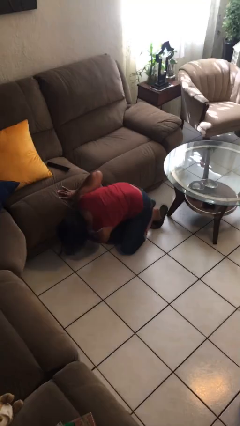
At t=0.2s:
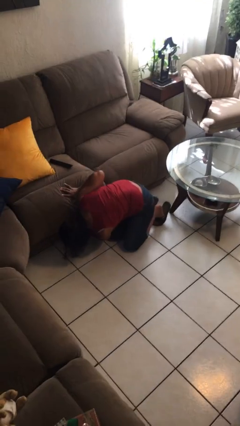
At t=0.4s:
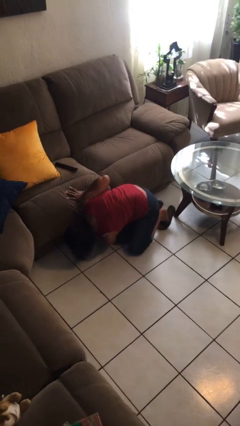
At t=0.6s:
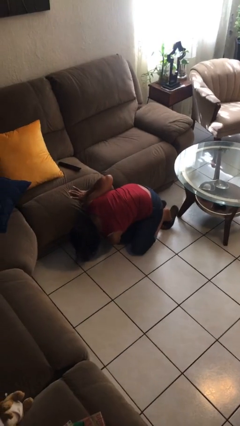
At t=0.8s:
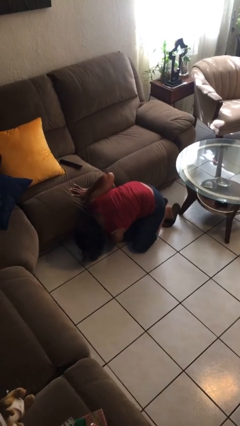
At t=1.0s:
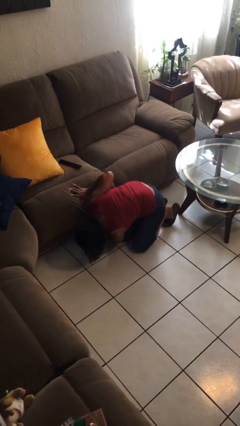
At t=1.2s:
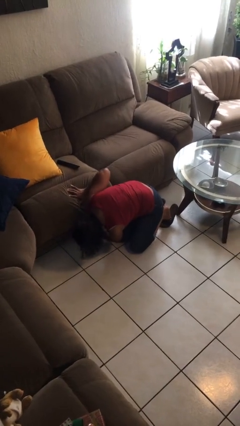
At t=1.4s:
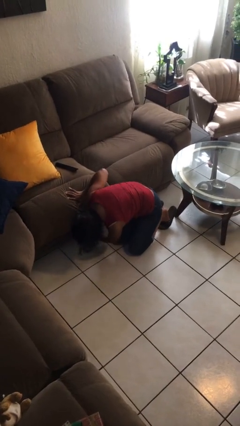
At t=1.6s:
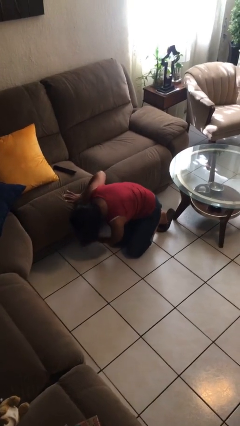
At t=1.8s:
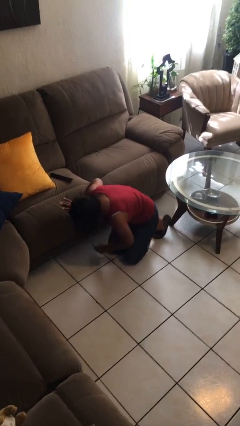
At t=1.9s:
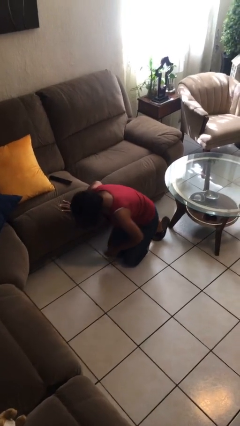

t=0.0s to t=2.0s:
person searches under couch

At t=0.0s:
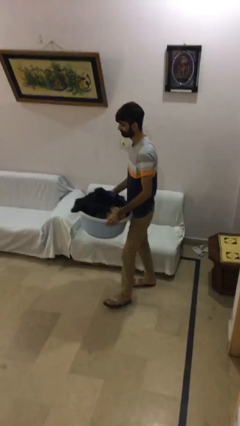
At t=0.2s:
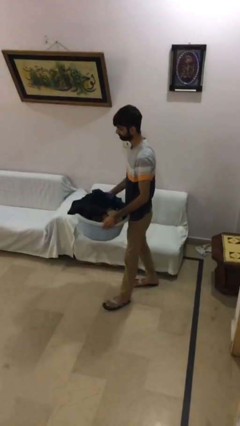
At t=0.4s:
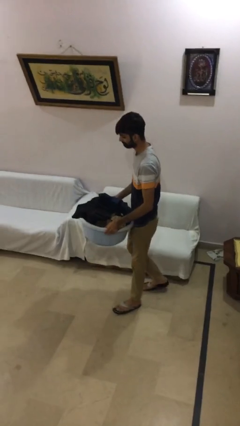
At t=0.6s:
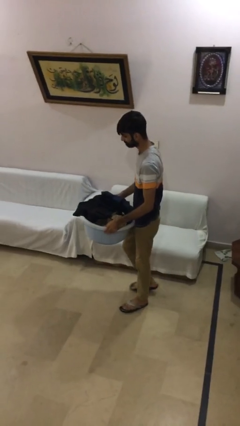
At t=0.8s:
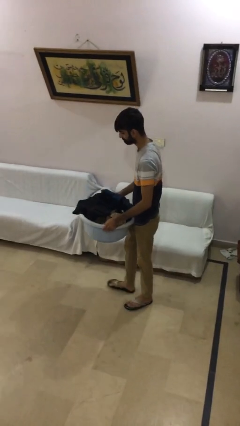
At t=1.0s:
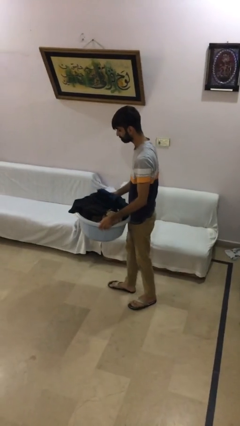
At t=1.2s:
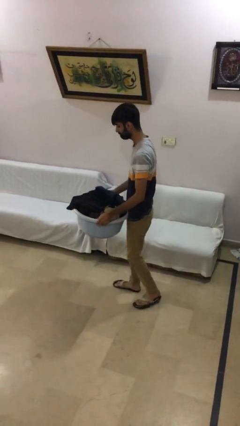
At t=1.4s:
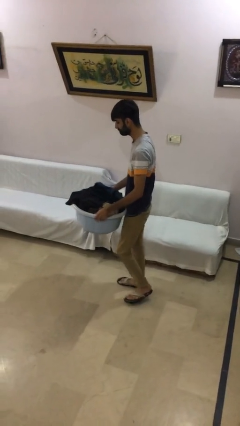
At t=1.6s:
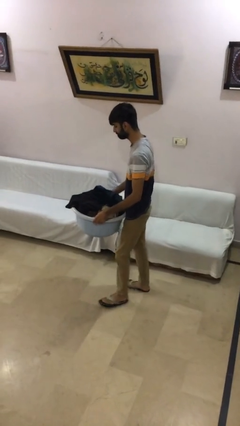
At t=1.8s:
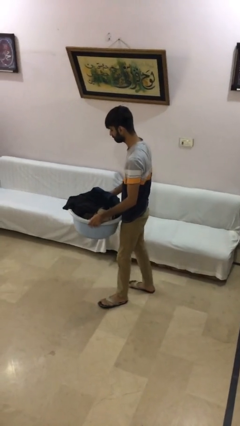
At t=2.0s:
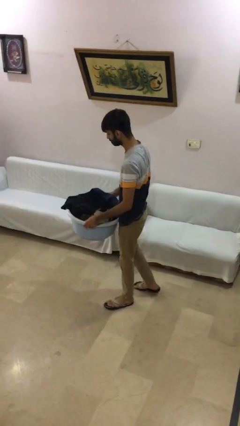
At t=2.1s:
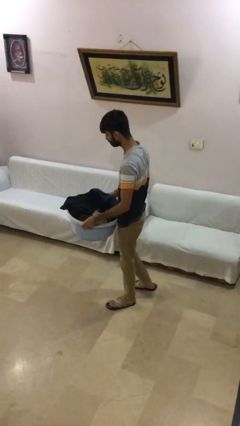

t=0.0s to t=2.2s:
person carries heavy object

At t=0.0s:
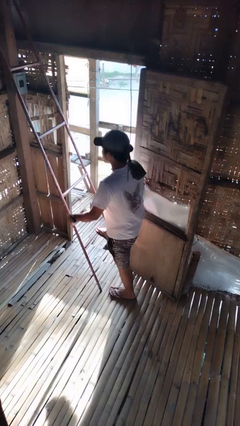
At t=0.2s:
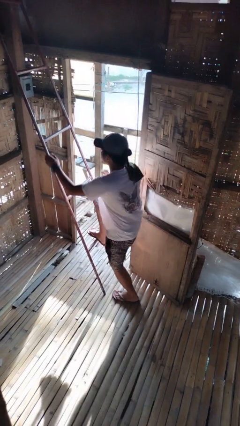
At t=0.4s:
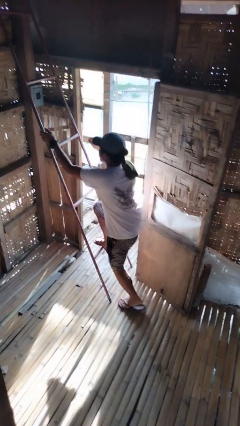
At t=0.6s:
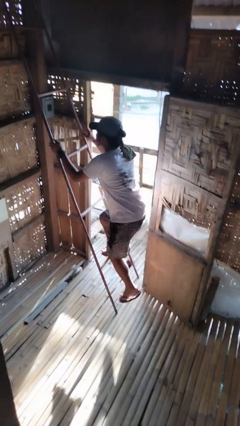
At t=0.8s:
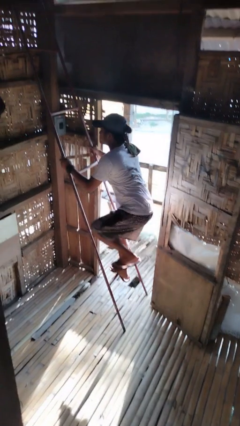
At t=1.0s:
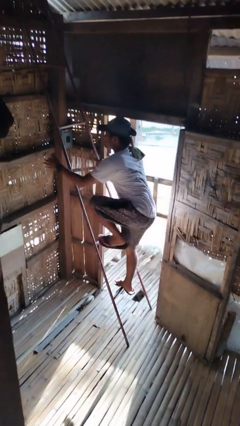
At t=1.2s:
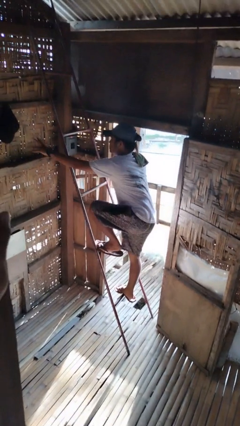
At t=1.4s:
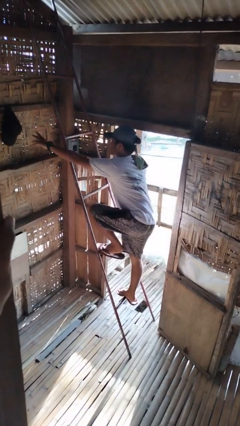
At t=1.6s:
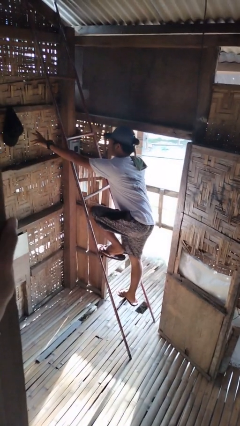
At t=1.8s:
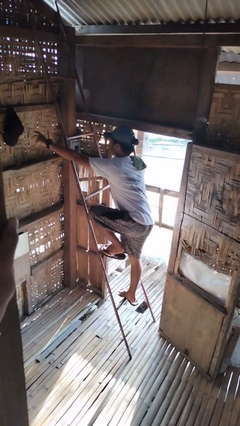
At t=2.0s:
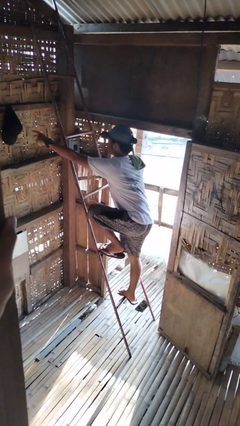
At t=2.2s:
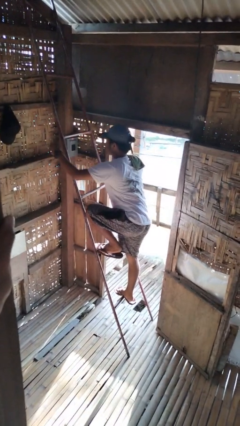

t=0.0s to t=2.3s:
person climbs up ladder

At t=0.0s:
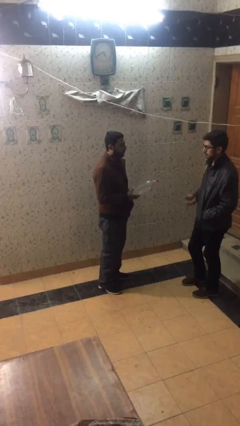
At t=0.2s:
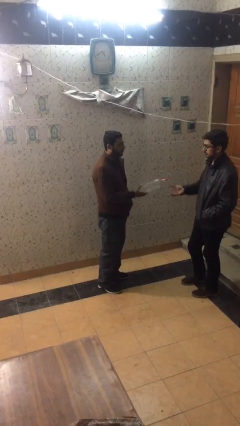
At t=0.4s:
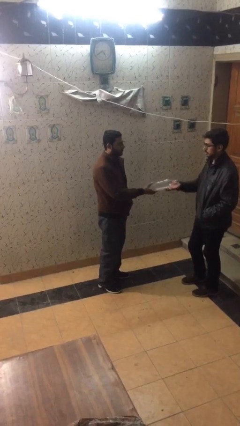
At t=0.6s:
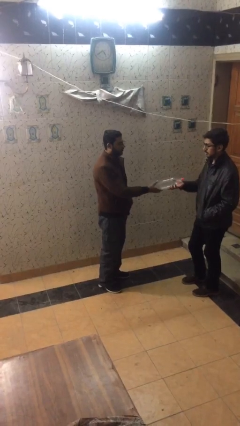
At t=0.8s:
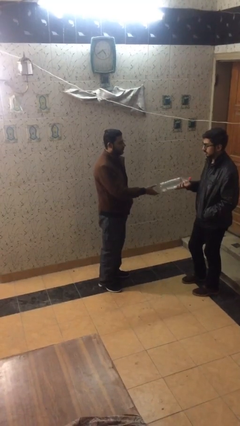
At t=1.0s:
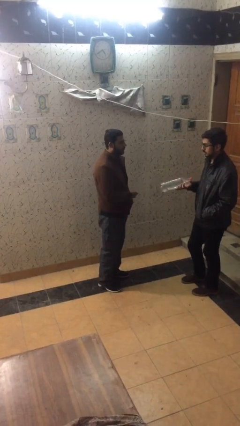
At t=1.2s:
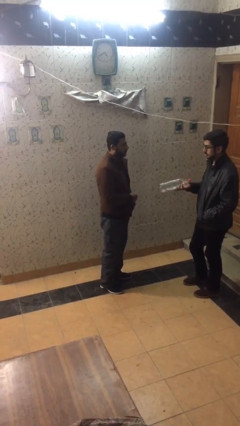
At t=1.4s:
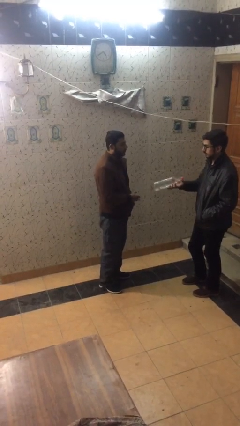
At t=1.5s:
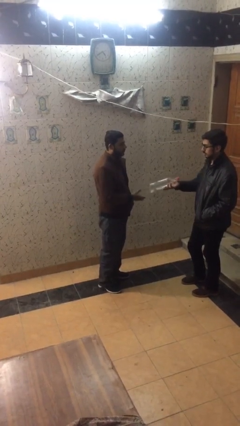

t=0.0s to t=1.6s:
person transfers object to person

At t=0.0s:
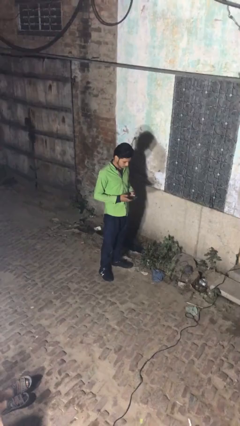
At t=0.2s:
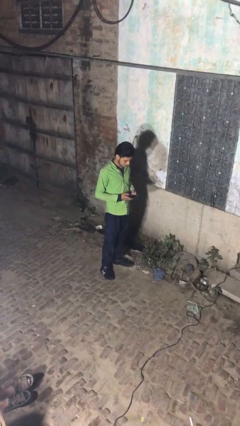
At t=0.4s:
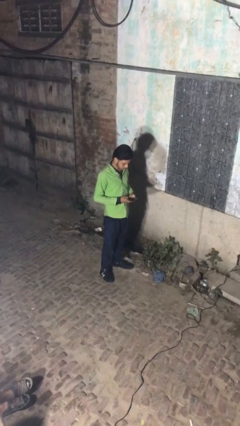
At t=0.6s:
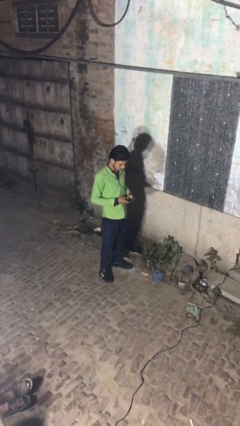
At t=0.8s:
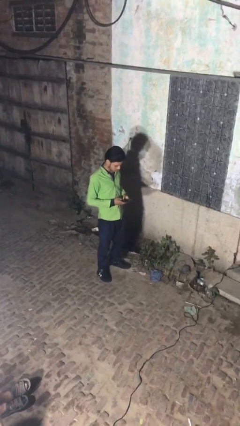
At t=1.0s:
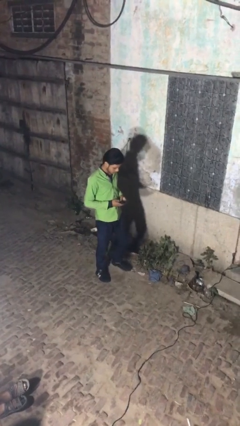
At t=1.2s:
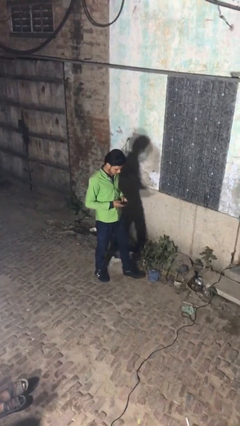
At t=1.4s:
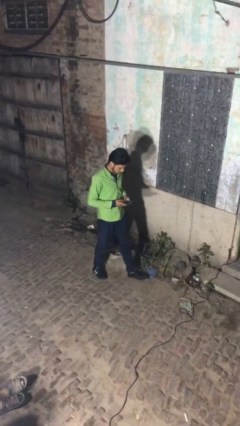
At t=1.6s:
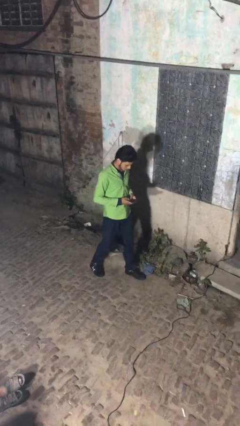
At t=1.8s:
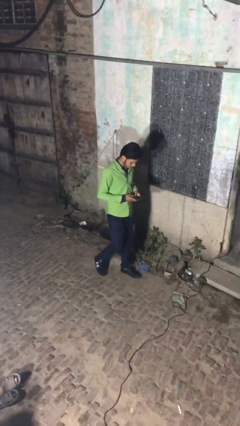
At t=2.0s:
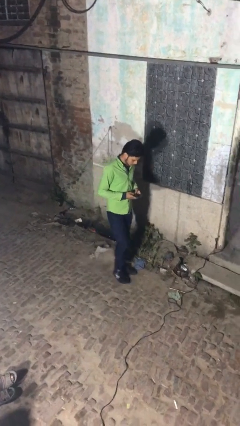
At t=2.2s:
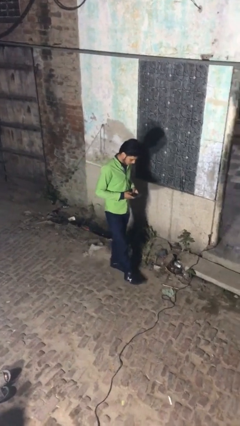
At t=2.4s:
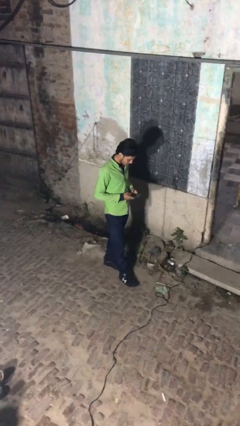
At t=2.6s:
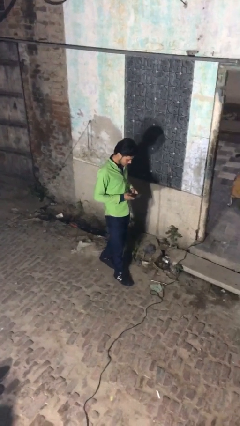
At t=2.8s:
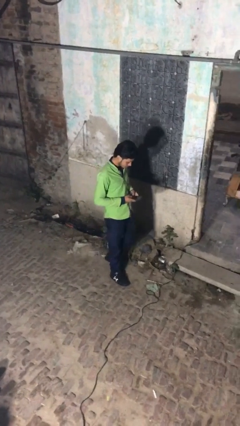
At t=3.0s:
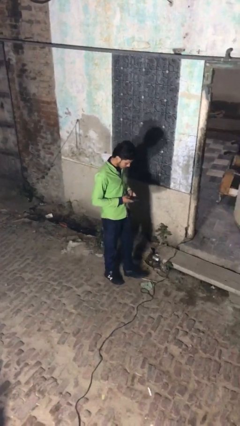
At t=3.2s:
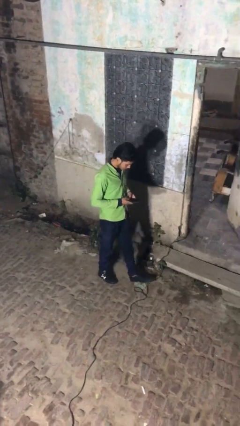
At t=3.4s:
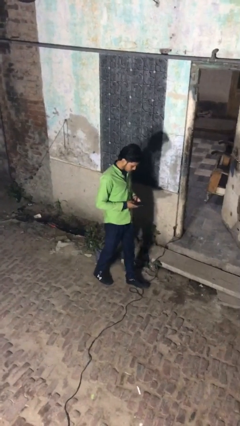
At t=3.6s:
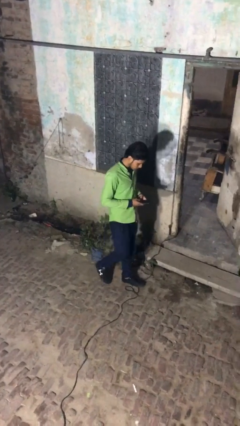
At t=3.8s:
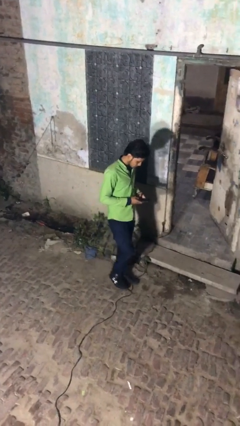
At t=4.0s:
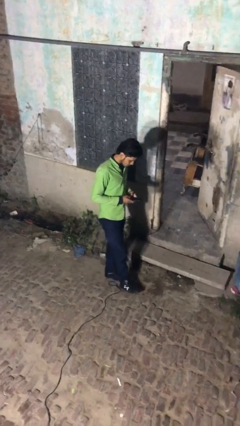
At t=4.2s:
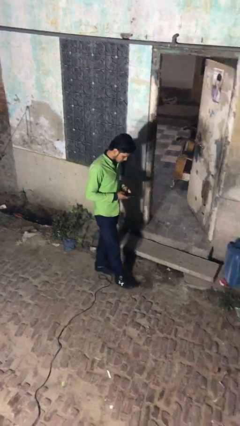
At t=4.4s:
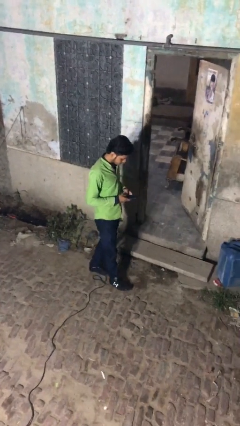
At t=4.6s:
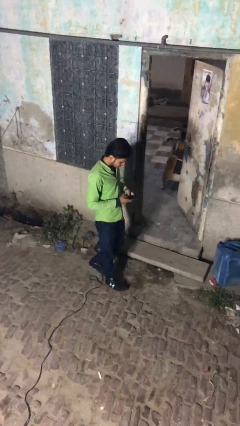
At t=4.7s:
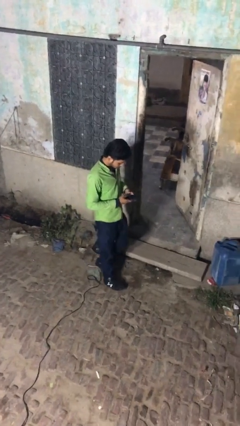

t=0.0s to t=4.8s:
person texts on phone

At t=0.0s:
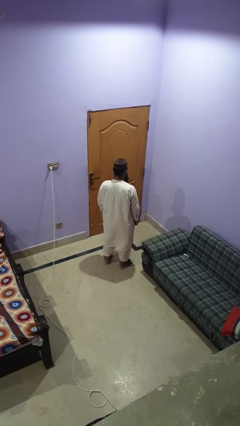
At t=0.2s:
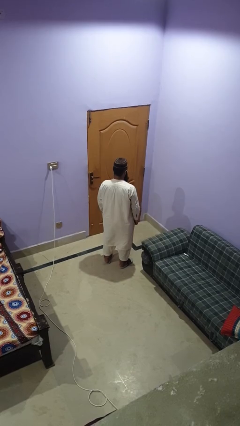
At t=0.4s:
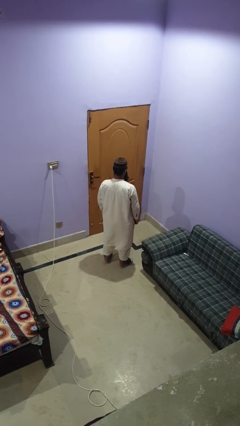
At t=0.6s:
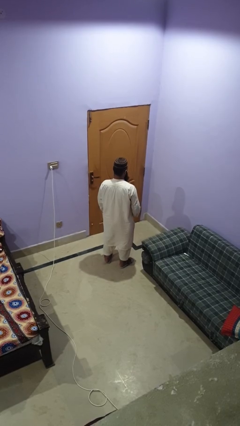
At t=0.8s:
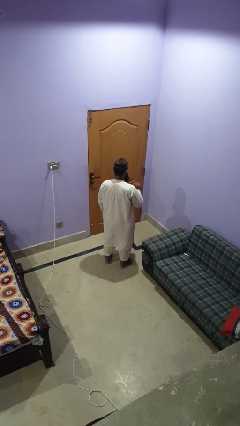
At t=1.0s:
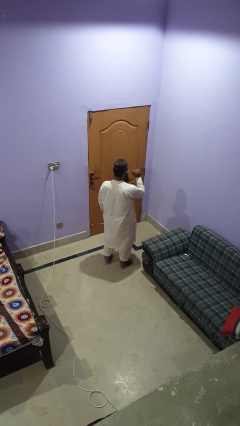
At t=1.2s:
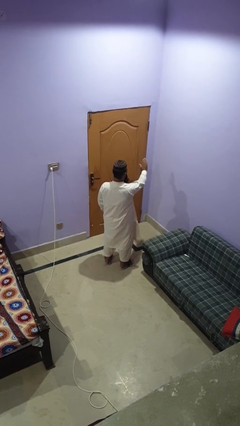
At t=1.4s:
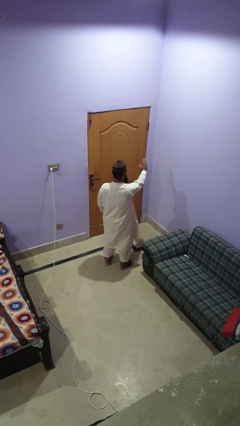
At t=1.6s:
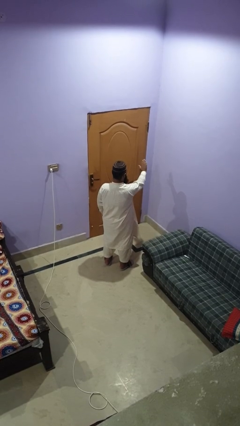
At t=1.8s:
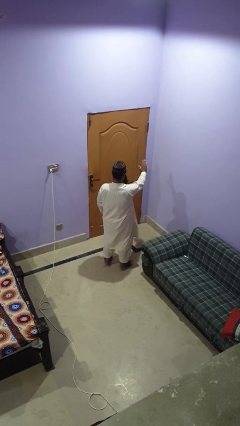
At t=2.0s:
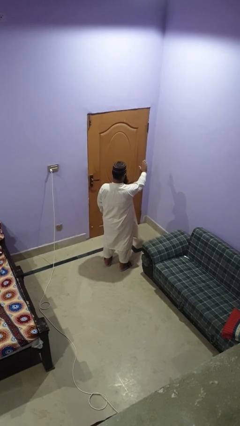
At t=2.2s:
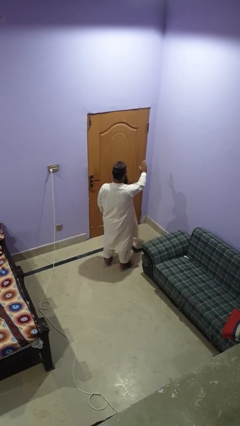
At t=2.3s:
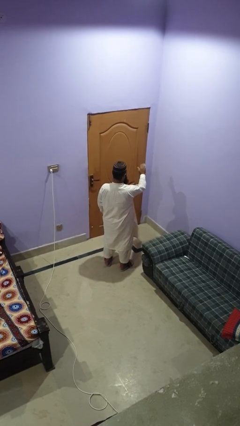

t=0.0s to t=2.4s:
person gestures stop

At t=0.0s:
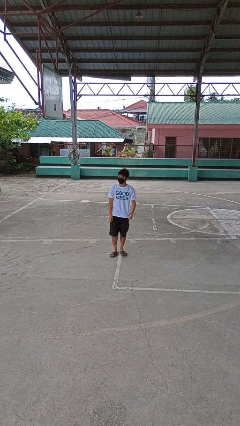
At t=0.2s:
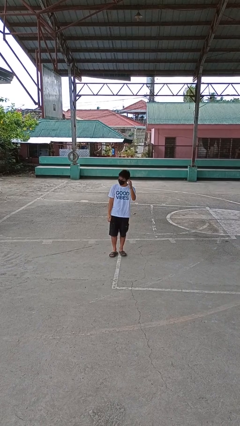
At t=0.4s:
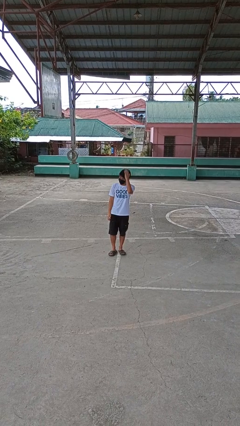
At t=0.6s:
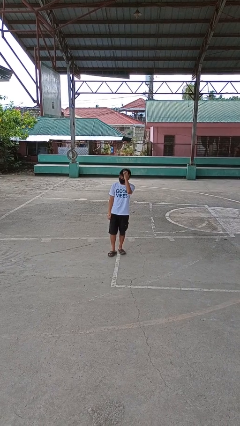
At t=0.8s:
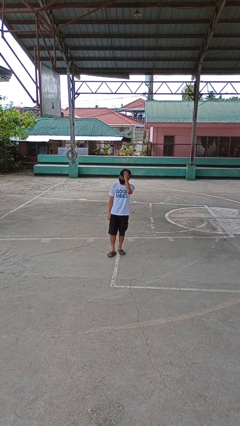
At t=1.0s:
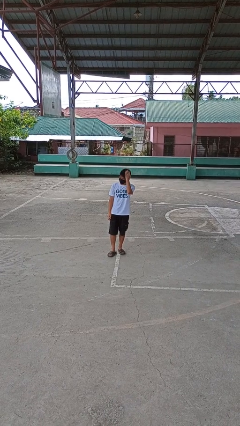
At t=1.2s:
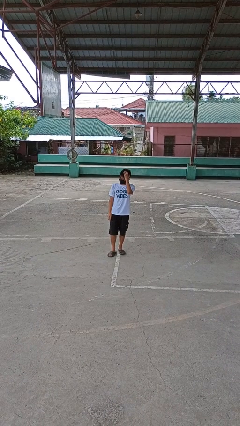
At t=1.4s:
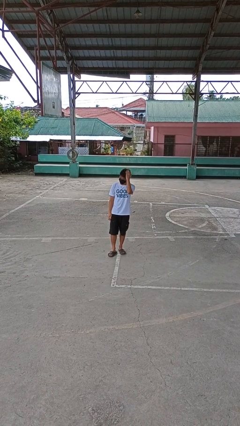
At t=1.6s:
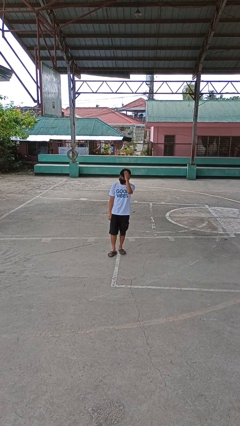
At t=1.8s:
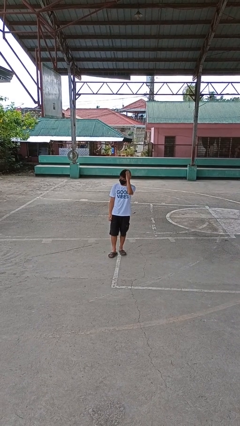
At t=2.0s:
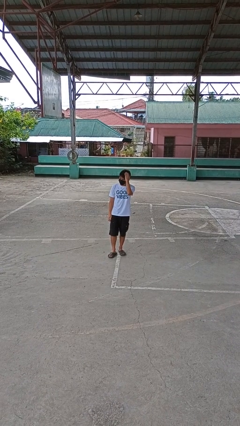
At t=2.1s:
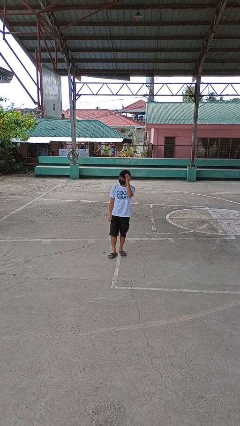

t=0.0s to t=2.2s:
person pats head
